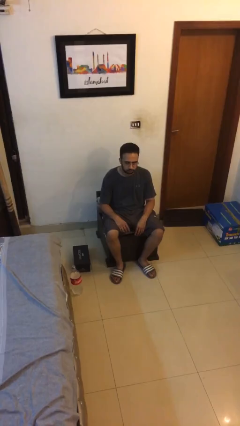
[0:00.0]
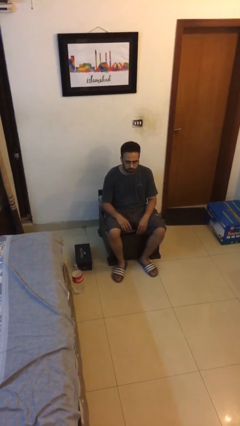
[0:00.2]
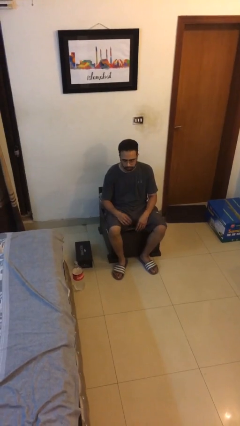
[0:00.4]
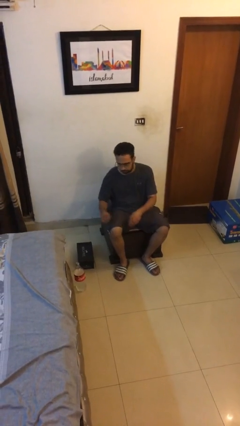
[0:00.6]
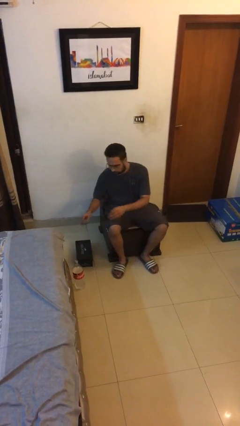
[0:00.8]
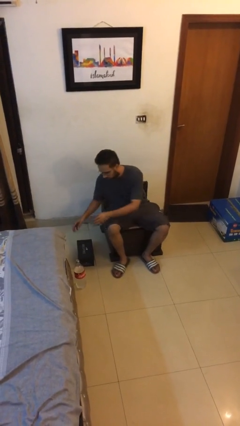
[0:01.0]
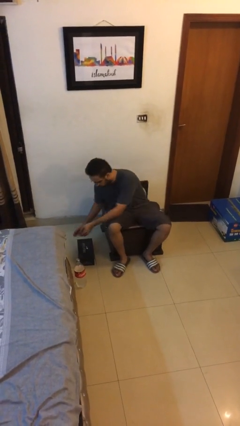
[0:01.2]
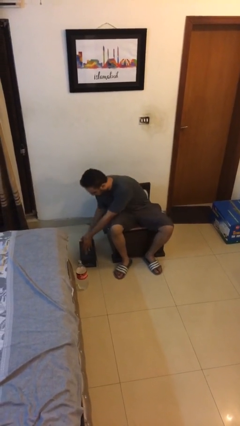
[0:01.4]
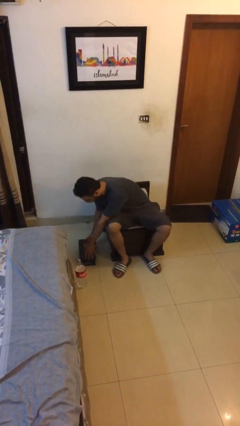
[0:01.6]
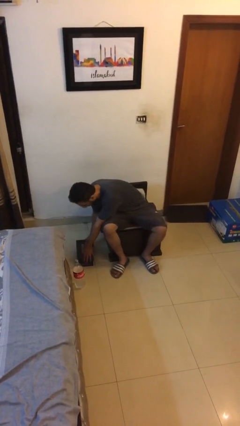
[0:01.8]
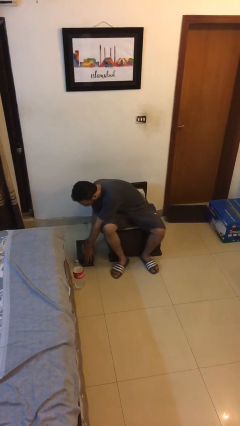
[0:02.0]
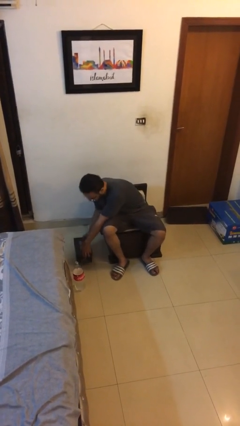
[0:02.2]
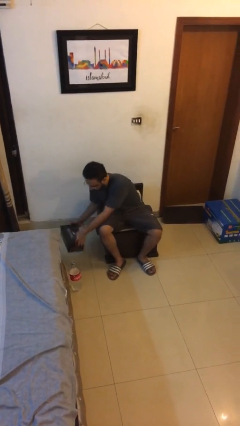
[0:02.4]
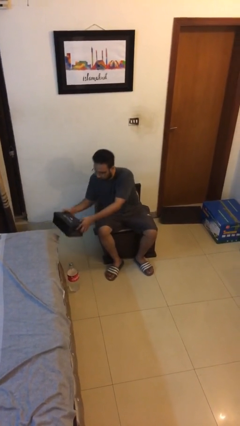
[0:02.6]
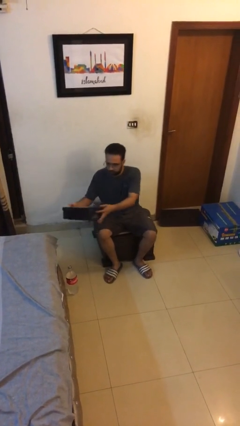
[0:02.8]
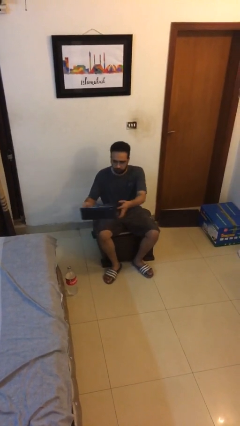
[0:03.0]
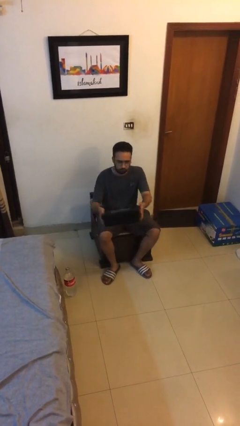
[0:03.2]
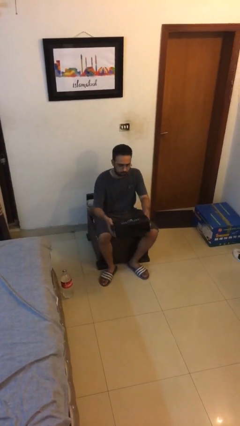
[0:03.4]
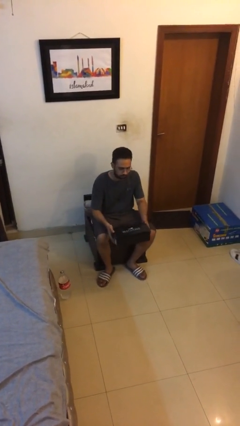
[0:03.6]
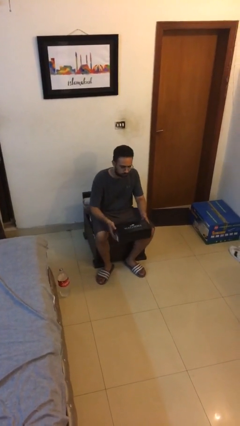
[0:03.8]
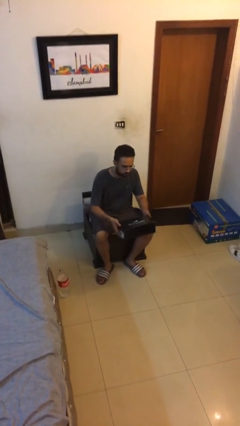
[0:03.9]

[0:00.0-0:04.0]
person picks up object from floor

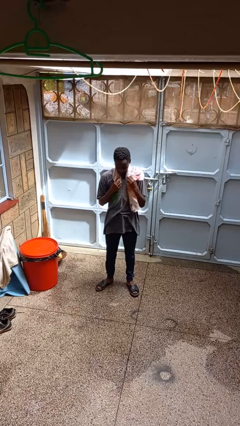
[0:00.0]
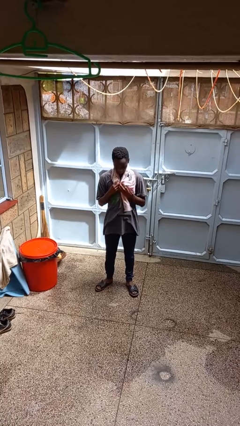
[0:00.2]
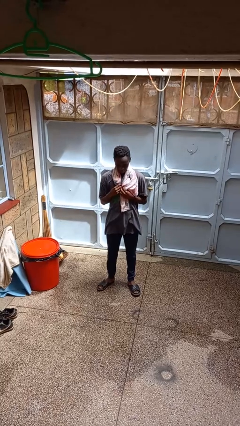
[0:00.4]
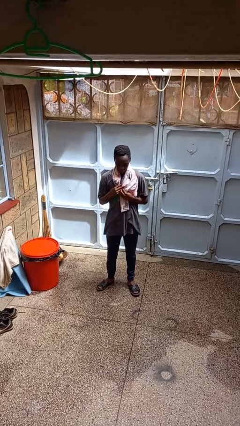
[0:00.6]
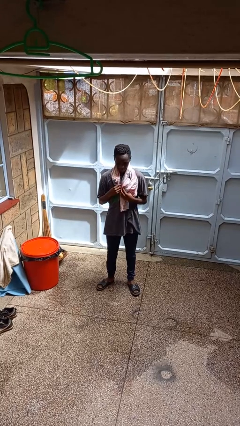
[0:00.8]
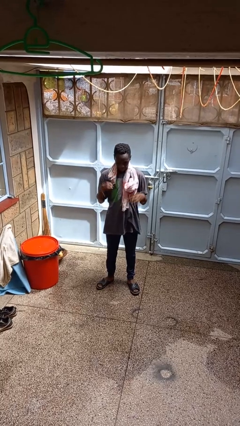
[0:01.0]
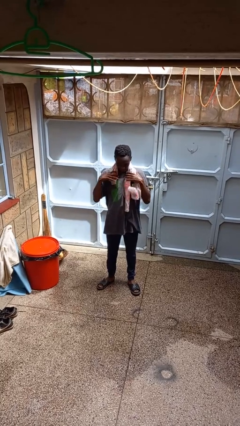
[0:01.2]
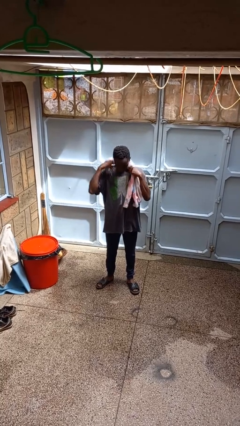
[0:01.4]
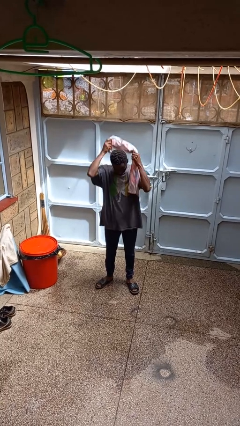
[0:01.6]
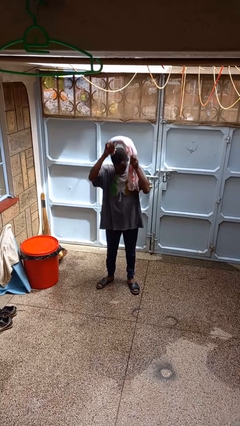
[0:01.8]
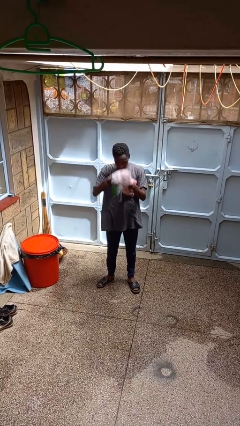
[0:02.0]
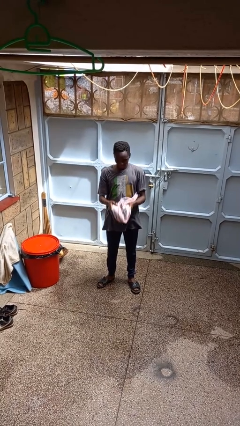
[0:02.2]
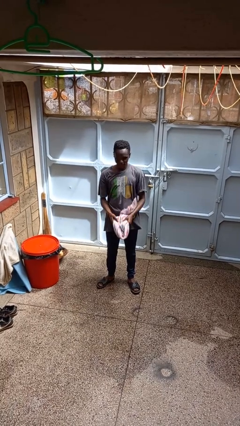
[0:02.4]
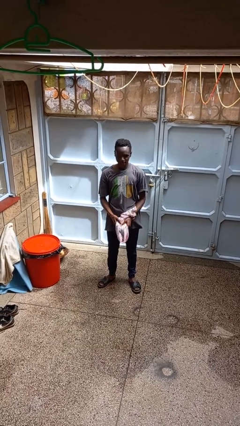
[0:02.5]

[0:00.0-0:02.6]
person takes off scarf

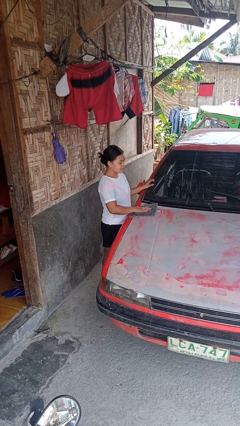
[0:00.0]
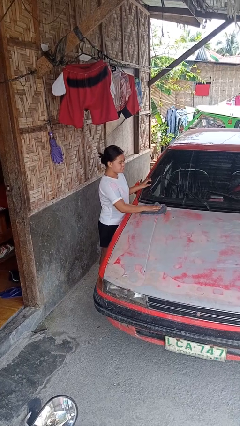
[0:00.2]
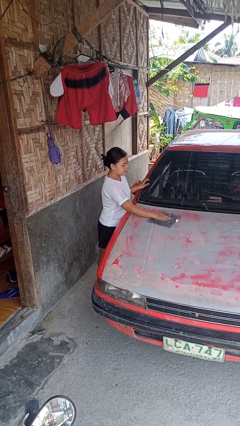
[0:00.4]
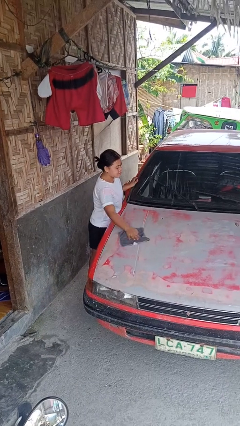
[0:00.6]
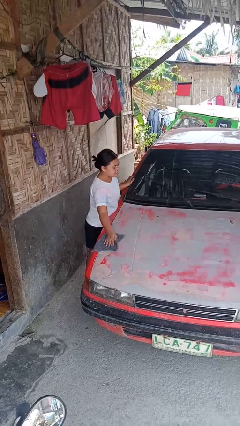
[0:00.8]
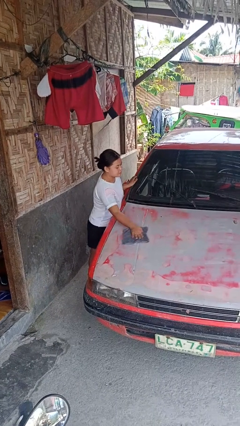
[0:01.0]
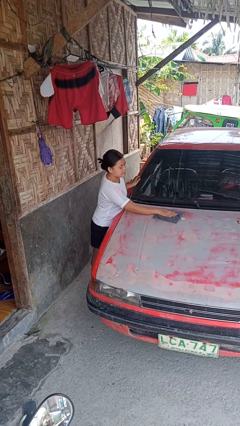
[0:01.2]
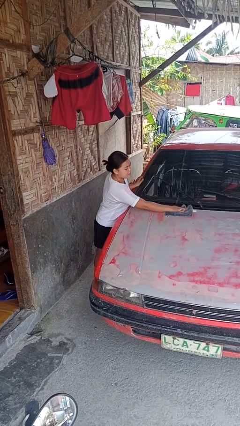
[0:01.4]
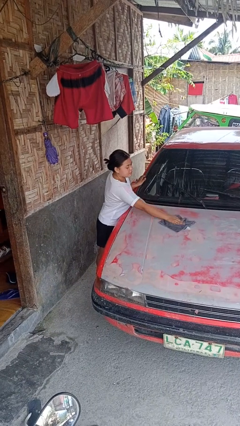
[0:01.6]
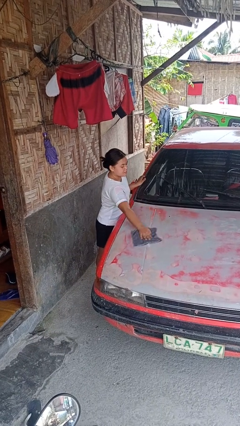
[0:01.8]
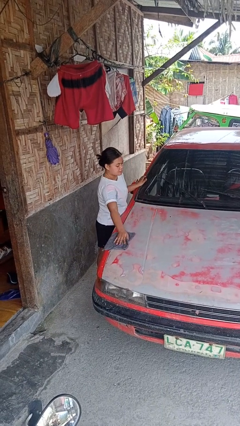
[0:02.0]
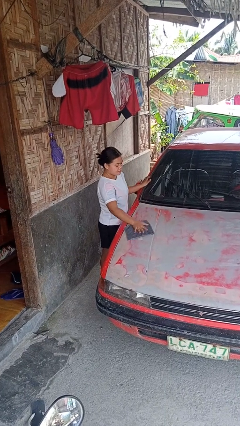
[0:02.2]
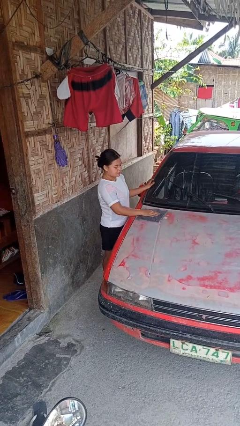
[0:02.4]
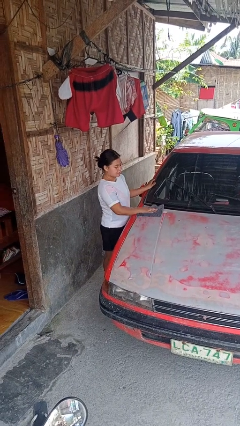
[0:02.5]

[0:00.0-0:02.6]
person polishes car with rag

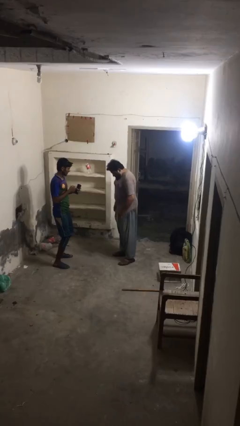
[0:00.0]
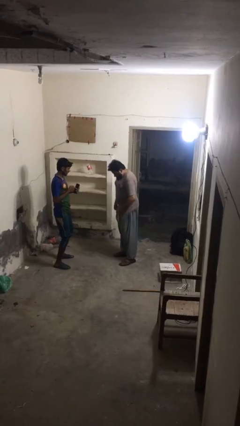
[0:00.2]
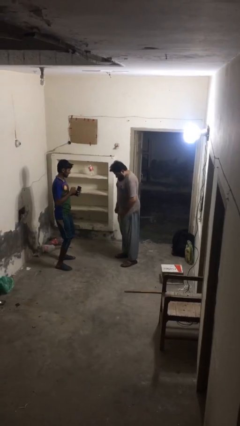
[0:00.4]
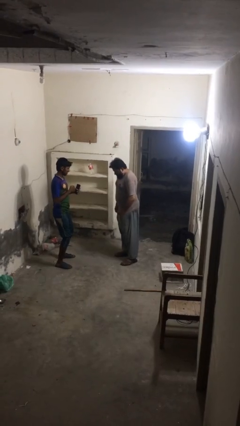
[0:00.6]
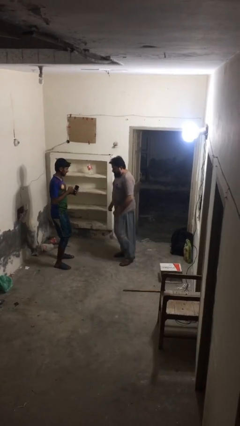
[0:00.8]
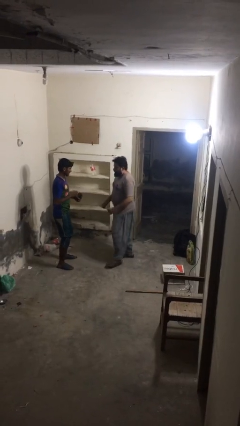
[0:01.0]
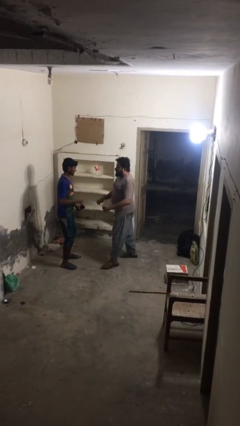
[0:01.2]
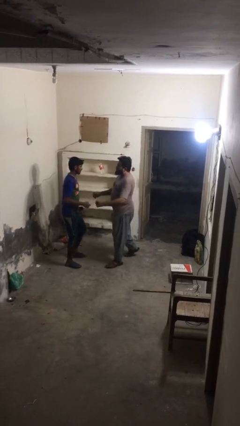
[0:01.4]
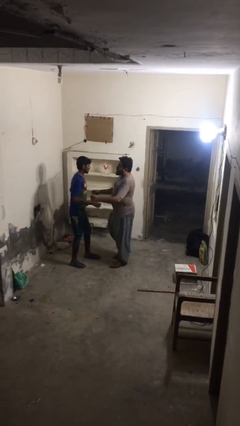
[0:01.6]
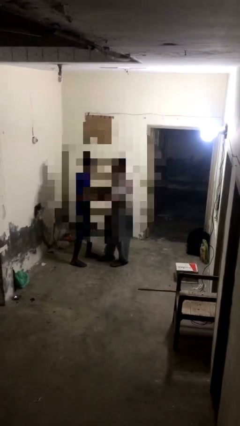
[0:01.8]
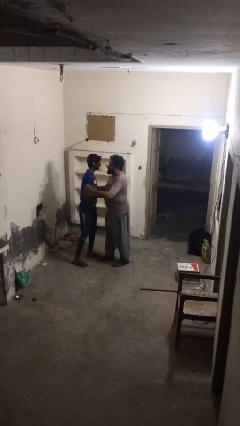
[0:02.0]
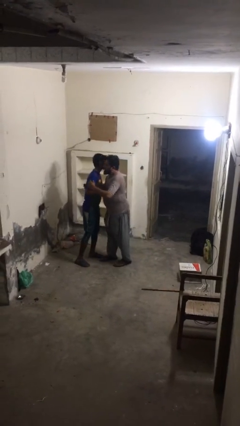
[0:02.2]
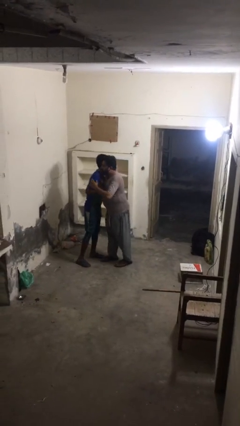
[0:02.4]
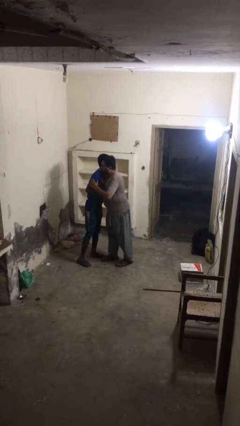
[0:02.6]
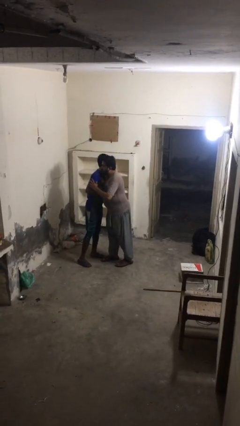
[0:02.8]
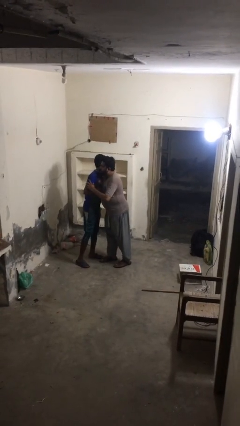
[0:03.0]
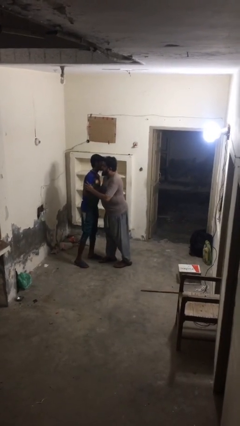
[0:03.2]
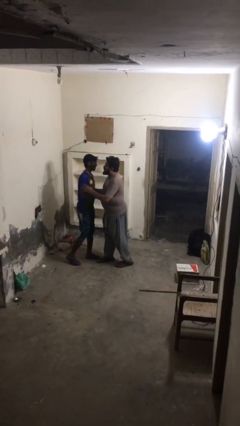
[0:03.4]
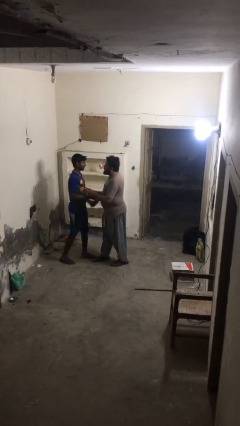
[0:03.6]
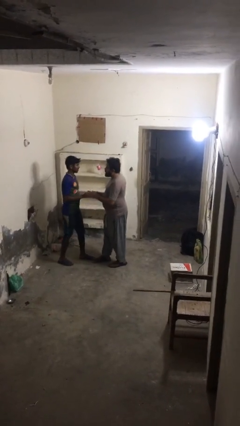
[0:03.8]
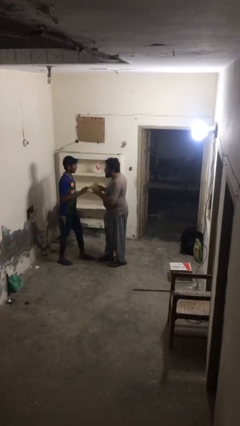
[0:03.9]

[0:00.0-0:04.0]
person embraces person

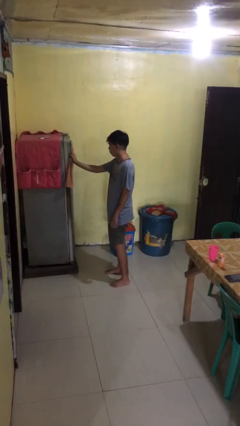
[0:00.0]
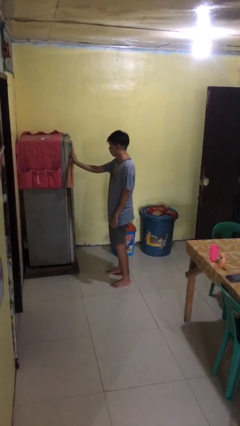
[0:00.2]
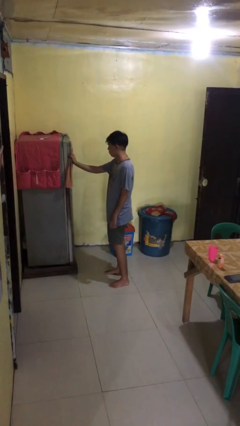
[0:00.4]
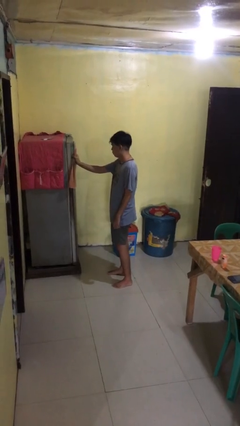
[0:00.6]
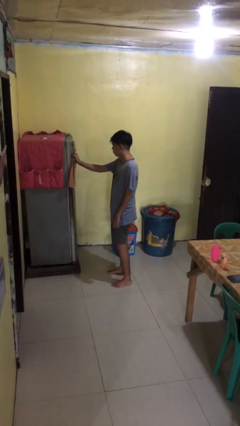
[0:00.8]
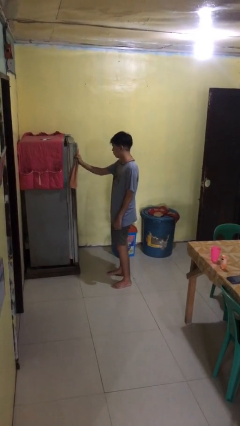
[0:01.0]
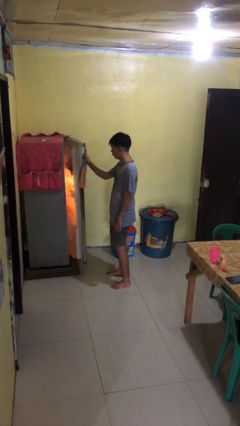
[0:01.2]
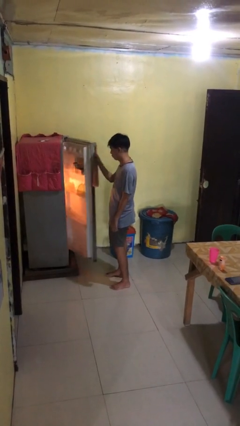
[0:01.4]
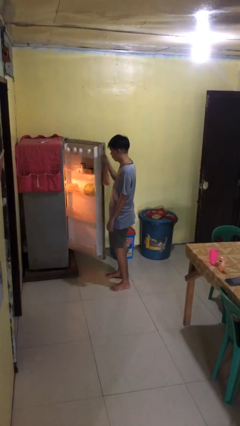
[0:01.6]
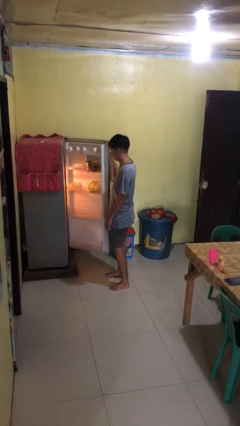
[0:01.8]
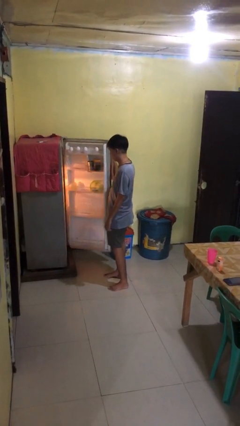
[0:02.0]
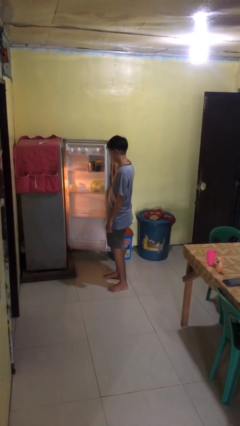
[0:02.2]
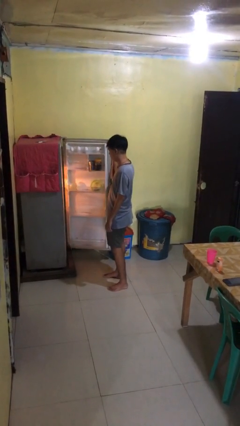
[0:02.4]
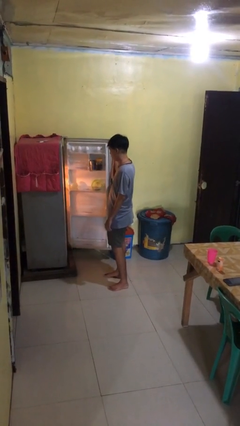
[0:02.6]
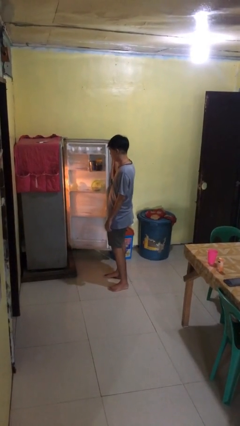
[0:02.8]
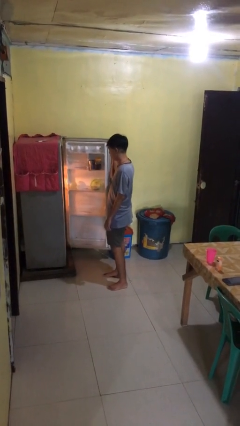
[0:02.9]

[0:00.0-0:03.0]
person opens refrigerator

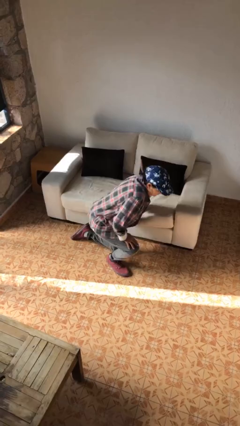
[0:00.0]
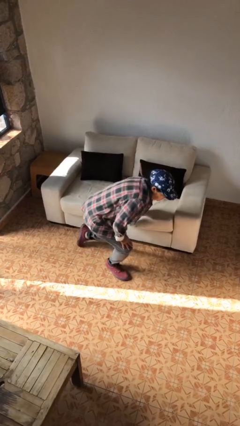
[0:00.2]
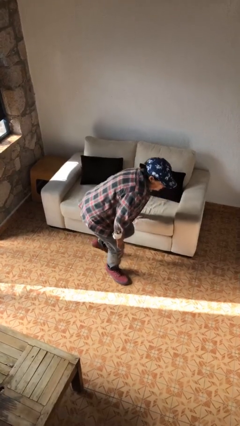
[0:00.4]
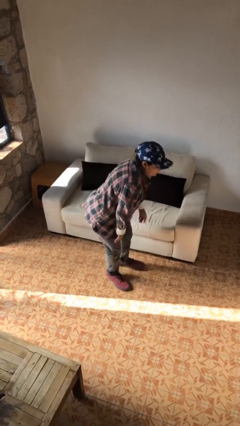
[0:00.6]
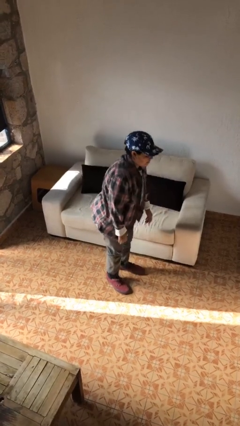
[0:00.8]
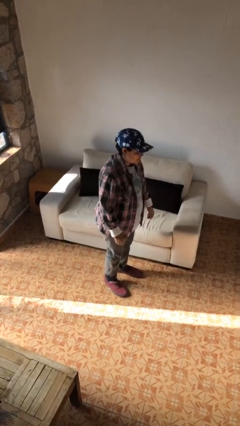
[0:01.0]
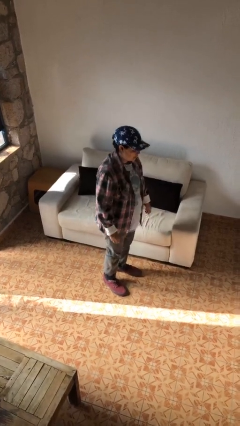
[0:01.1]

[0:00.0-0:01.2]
person stands up from floor
